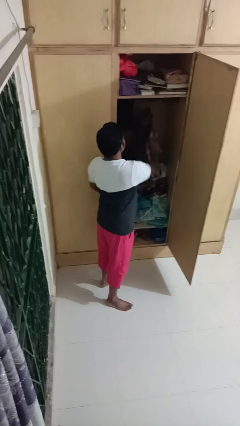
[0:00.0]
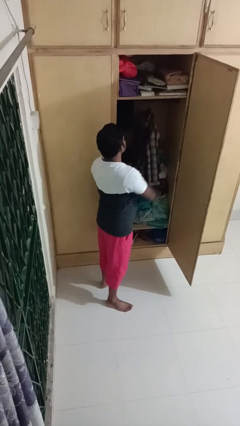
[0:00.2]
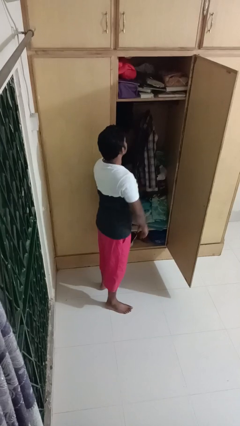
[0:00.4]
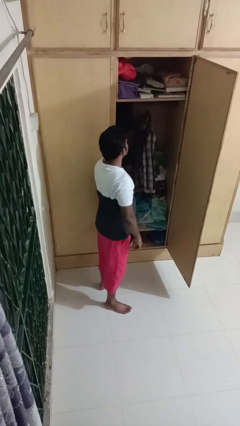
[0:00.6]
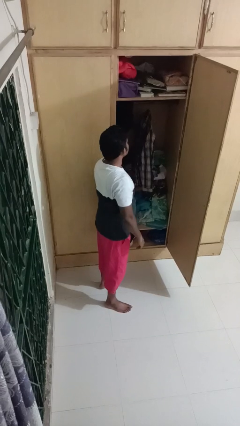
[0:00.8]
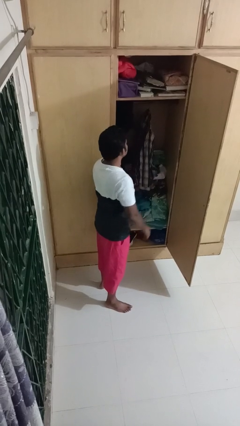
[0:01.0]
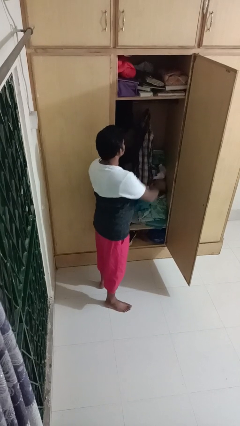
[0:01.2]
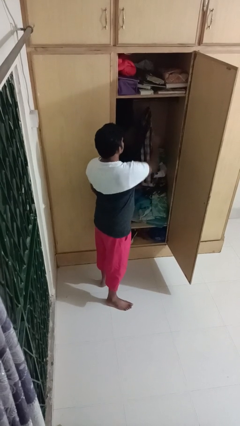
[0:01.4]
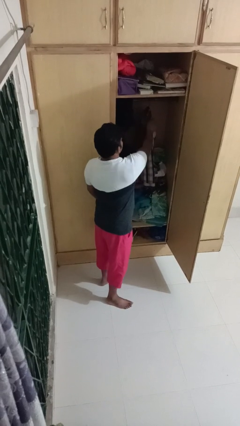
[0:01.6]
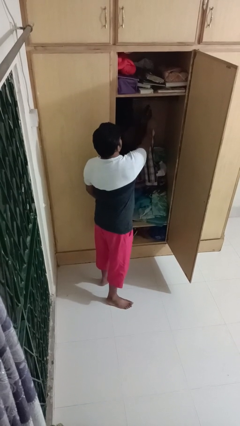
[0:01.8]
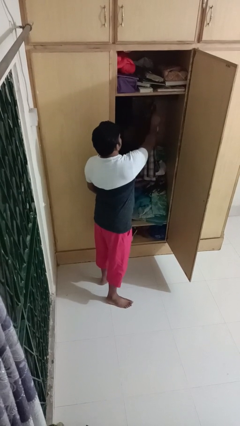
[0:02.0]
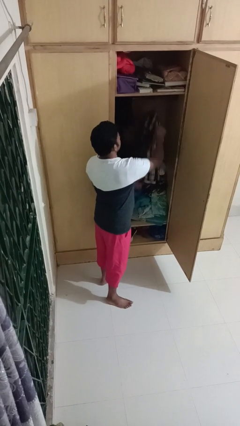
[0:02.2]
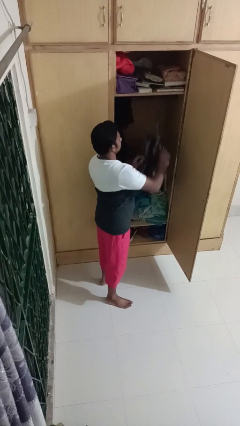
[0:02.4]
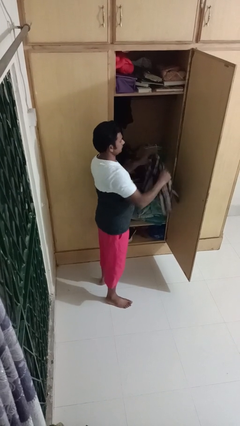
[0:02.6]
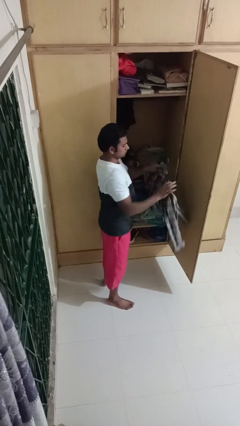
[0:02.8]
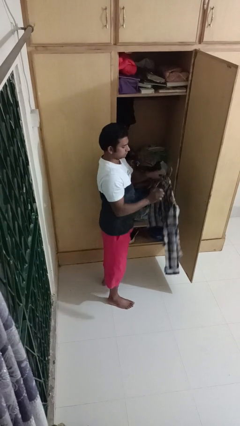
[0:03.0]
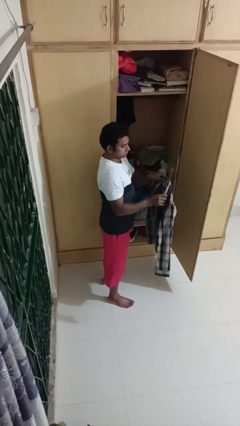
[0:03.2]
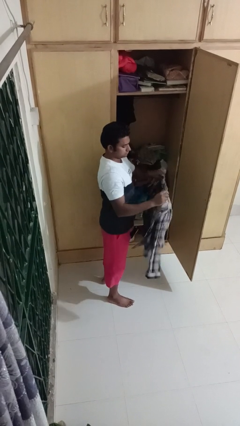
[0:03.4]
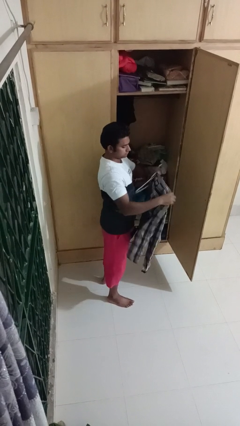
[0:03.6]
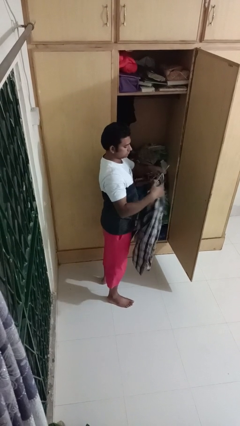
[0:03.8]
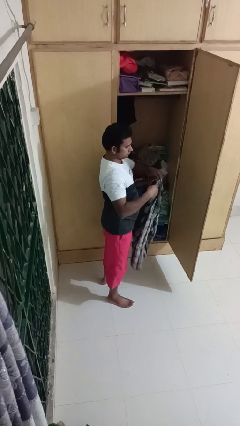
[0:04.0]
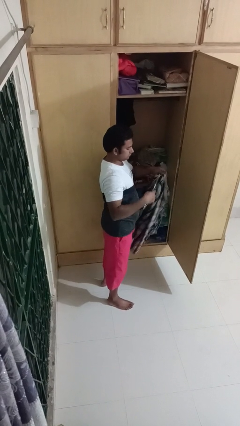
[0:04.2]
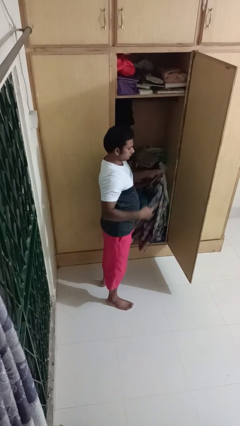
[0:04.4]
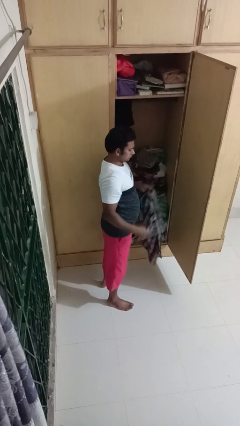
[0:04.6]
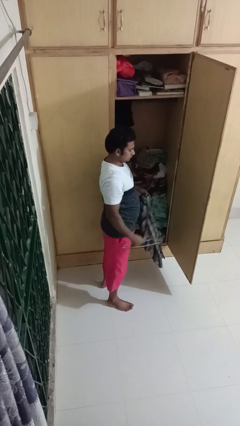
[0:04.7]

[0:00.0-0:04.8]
person takes clothes from closet

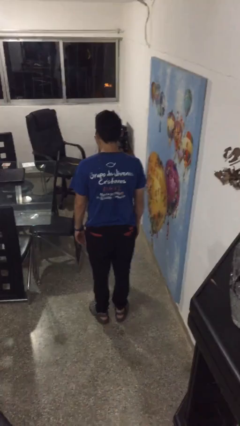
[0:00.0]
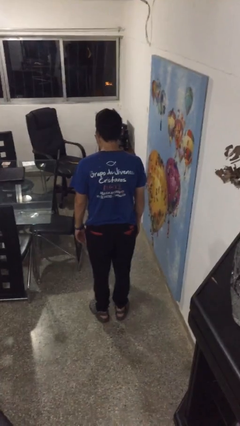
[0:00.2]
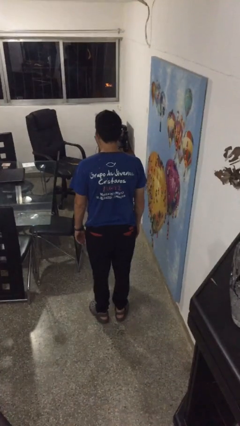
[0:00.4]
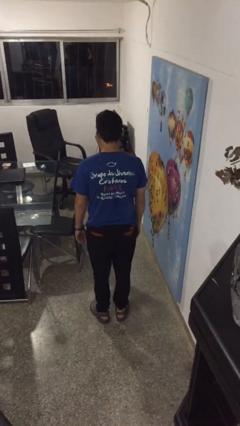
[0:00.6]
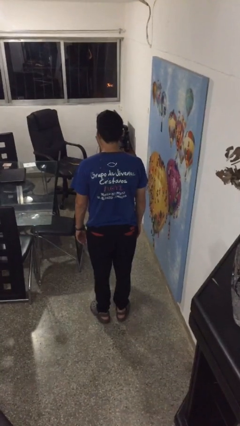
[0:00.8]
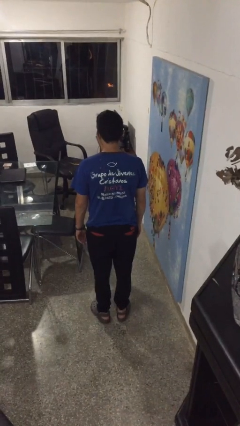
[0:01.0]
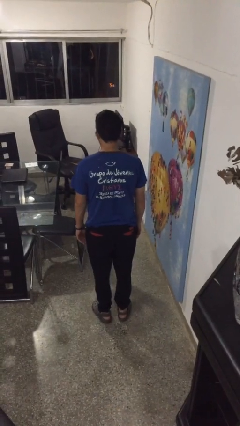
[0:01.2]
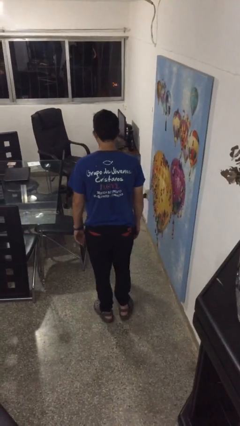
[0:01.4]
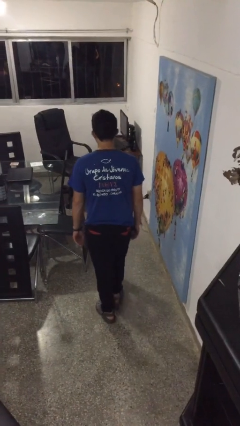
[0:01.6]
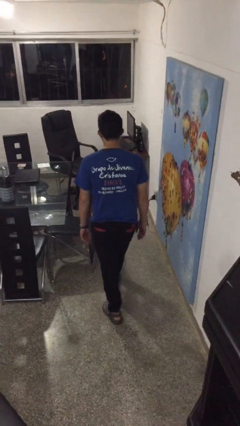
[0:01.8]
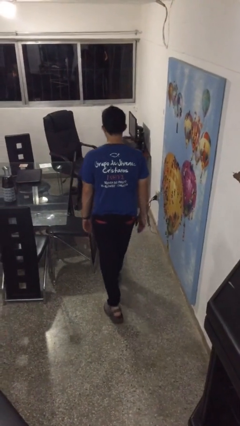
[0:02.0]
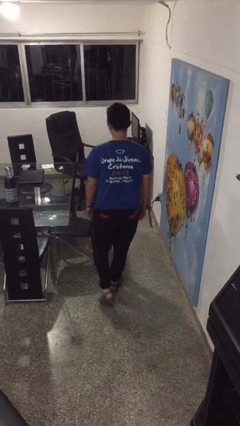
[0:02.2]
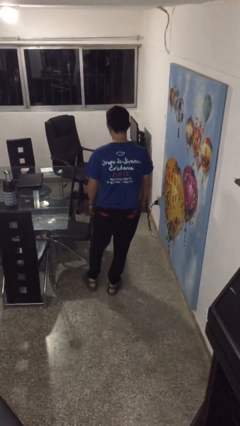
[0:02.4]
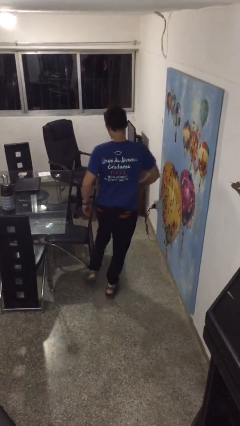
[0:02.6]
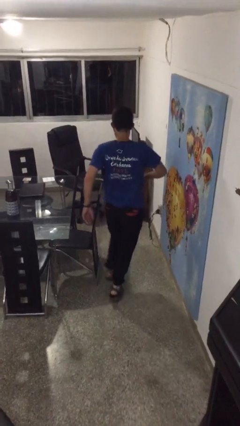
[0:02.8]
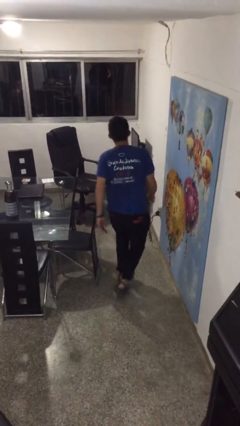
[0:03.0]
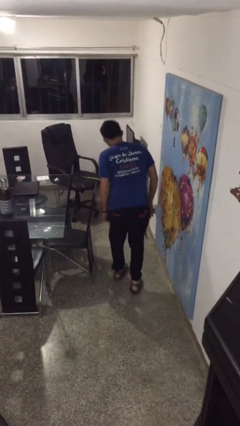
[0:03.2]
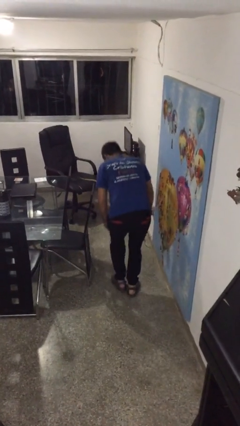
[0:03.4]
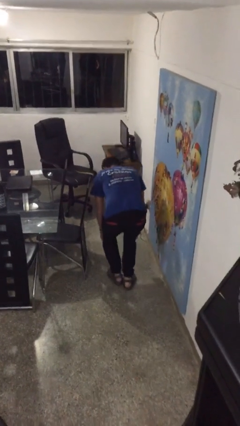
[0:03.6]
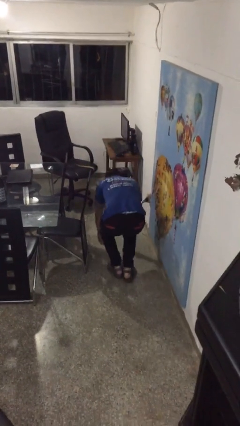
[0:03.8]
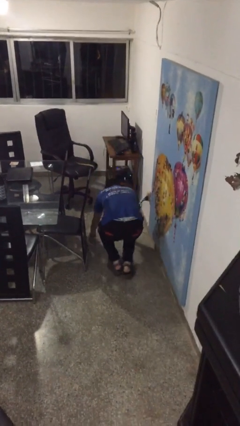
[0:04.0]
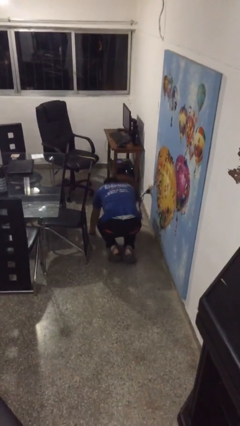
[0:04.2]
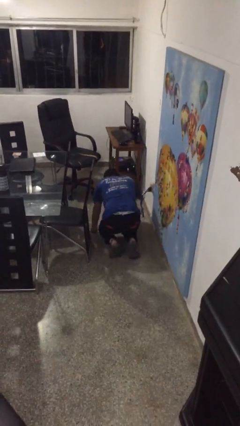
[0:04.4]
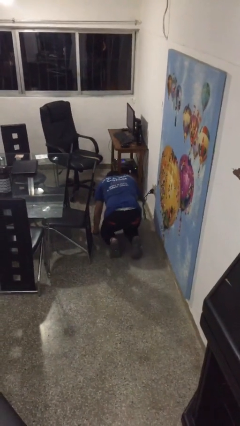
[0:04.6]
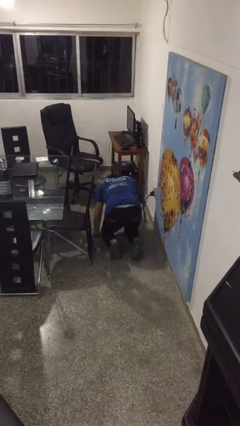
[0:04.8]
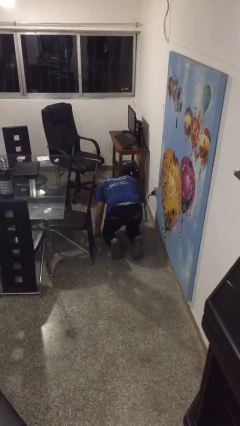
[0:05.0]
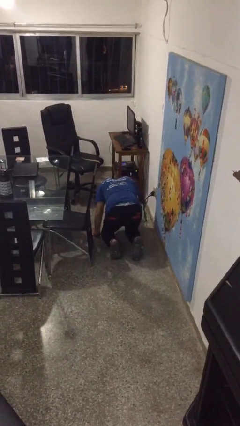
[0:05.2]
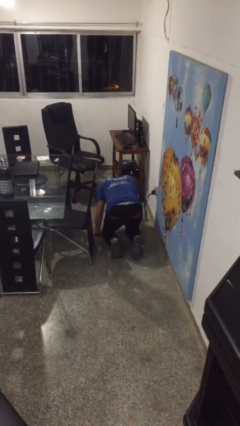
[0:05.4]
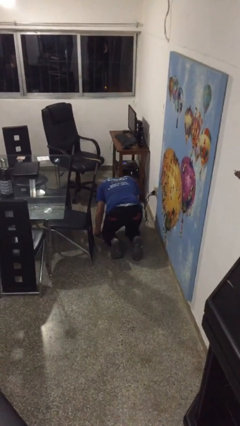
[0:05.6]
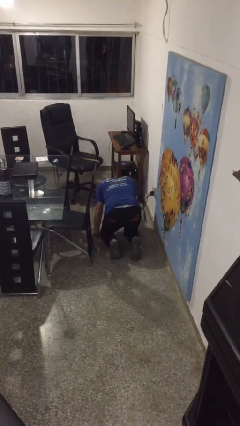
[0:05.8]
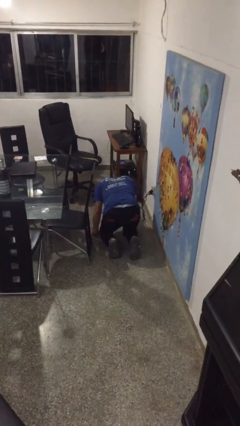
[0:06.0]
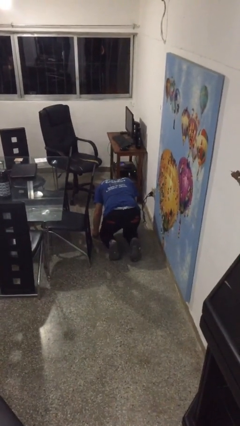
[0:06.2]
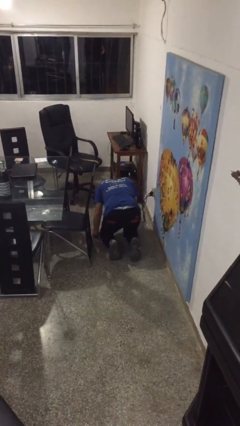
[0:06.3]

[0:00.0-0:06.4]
person trips on object on floor

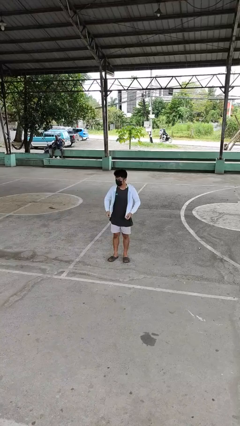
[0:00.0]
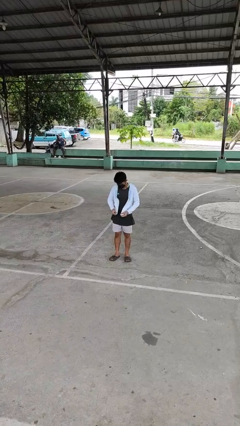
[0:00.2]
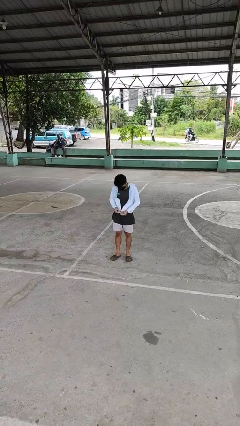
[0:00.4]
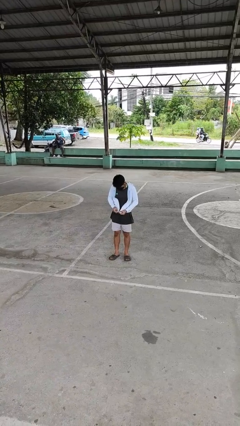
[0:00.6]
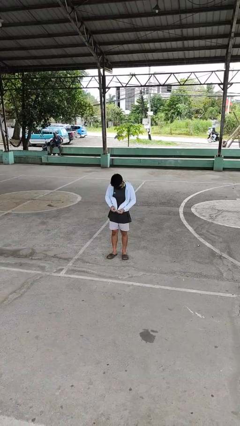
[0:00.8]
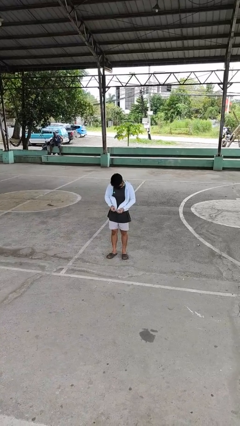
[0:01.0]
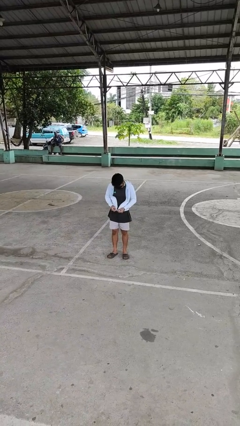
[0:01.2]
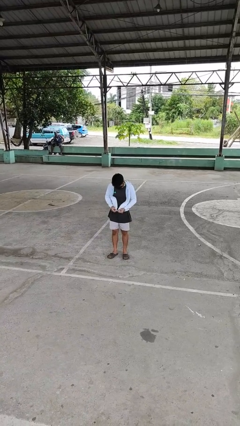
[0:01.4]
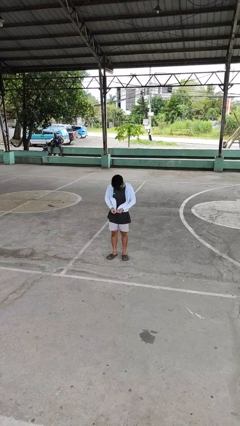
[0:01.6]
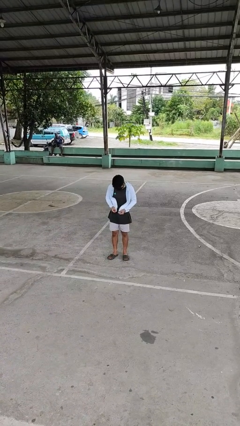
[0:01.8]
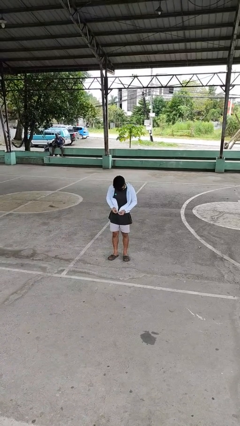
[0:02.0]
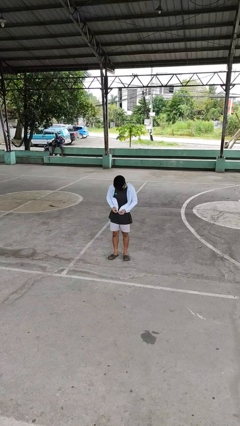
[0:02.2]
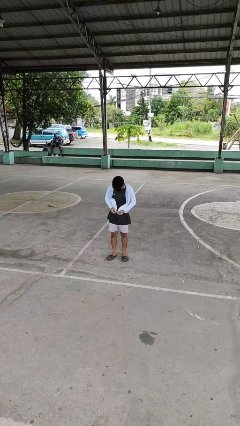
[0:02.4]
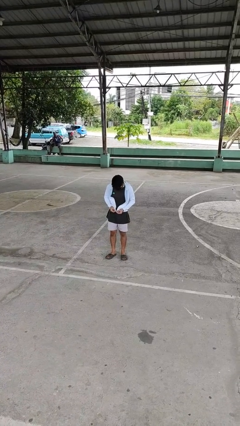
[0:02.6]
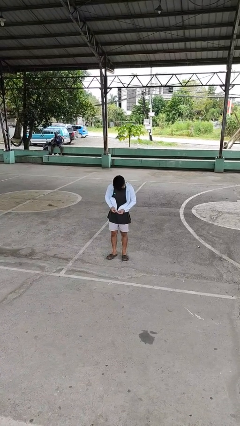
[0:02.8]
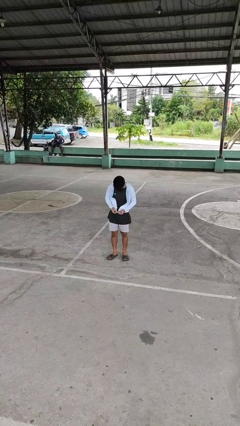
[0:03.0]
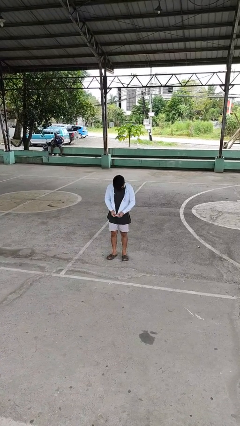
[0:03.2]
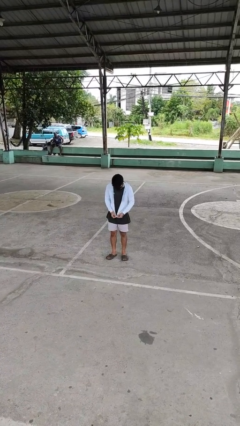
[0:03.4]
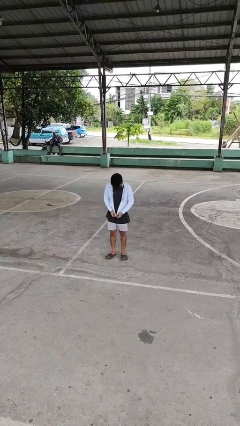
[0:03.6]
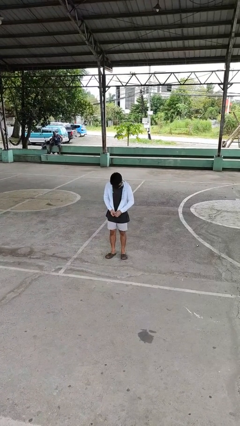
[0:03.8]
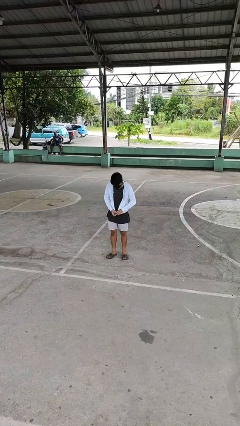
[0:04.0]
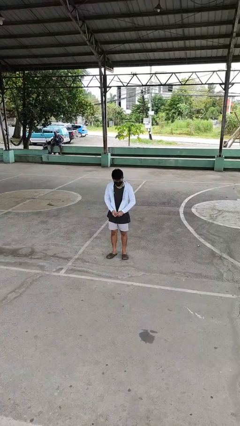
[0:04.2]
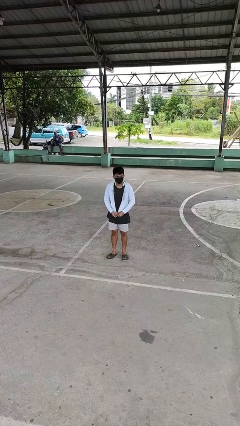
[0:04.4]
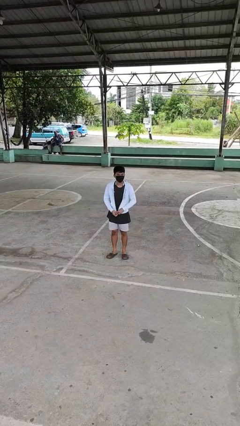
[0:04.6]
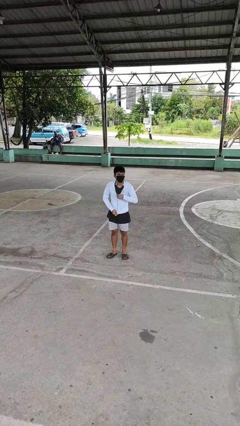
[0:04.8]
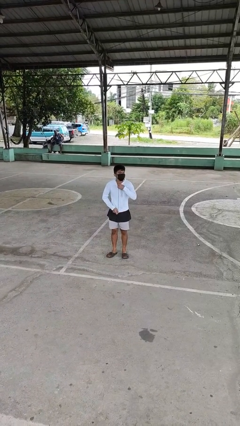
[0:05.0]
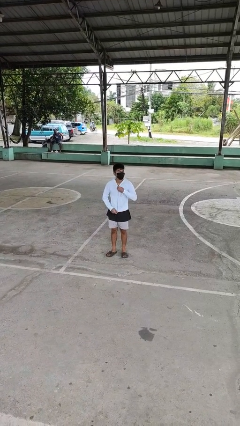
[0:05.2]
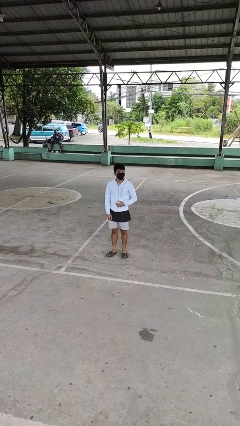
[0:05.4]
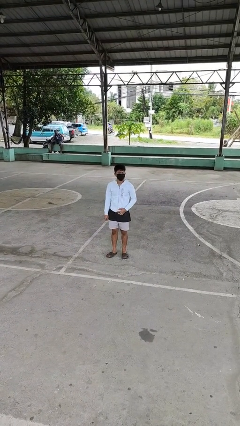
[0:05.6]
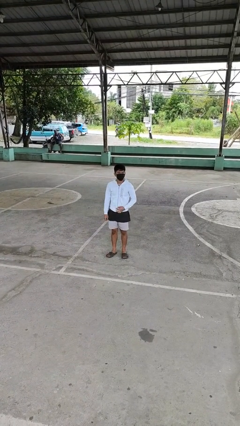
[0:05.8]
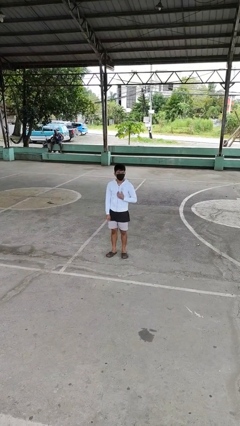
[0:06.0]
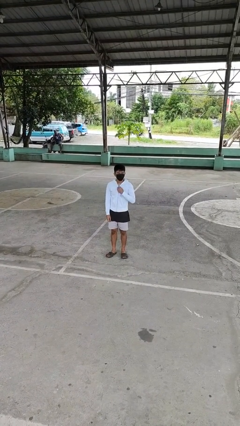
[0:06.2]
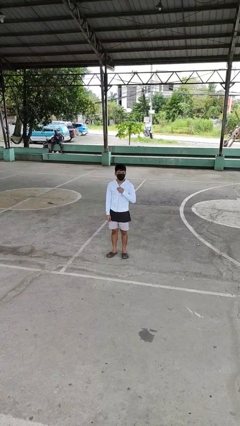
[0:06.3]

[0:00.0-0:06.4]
person zips up jacket
